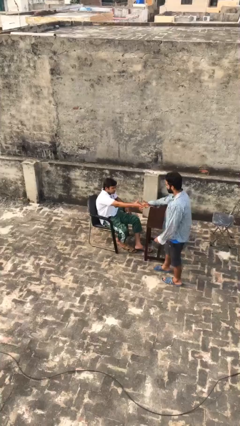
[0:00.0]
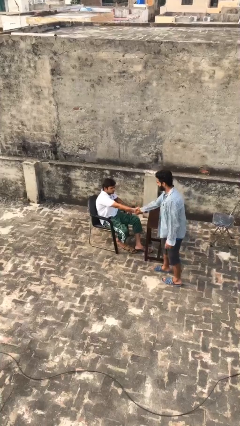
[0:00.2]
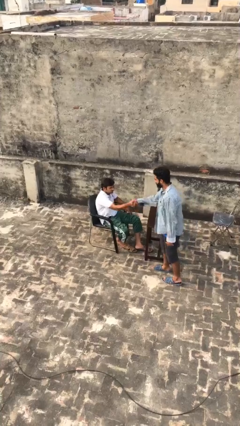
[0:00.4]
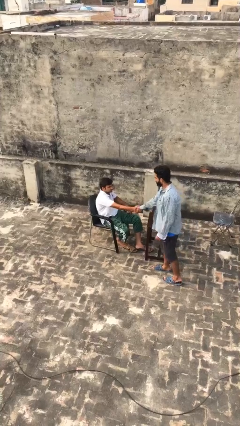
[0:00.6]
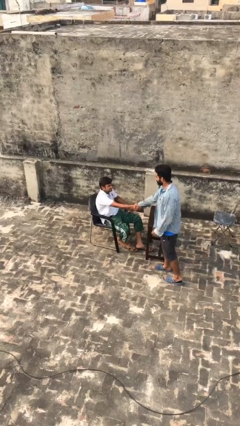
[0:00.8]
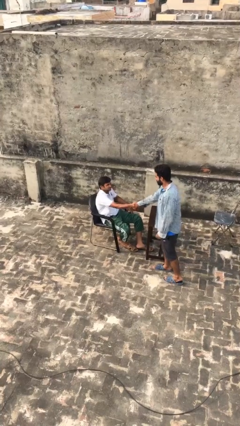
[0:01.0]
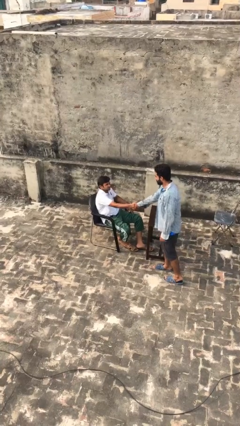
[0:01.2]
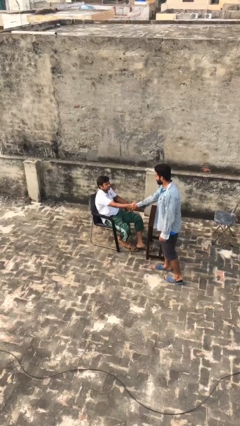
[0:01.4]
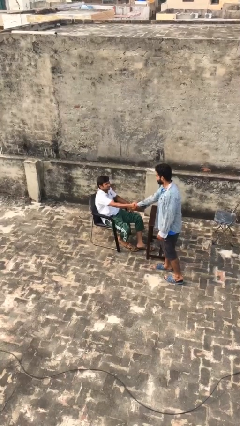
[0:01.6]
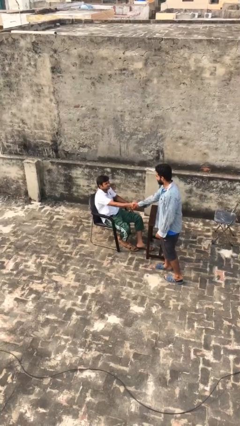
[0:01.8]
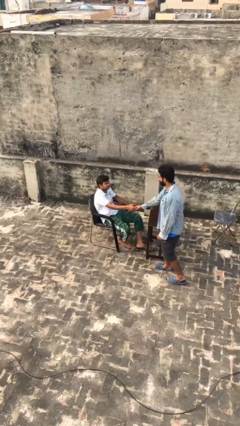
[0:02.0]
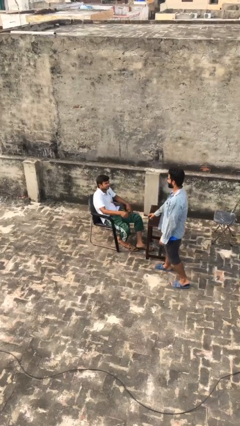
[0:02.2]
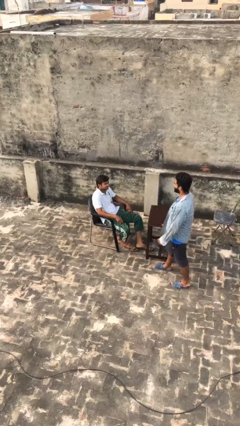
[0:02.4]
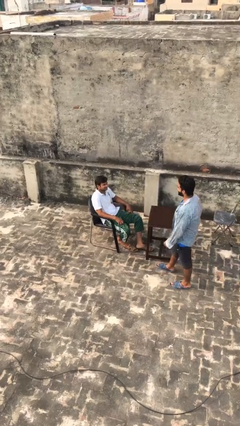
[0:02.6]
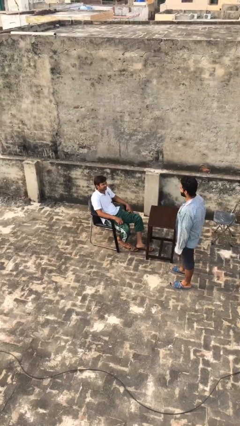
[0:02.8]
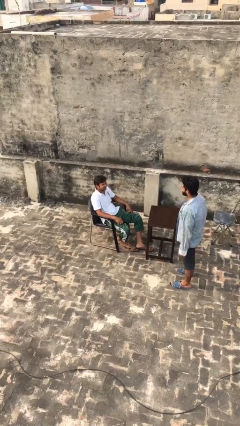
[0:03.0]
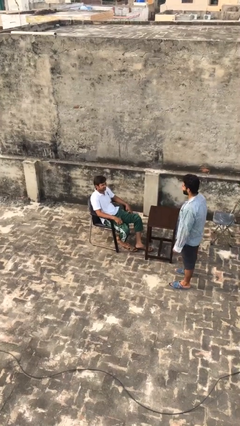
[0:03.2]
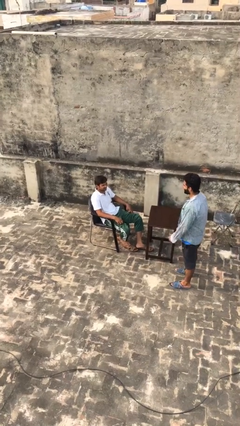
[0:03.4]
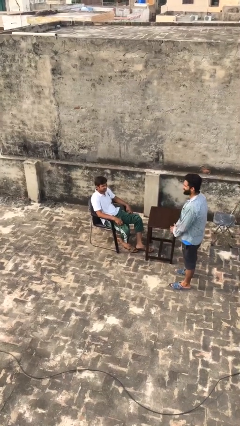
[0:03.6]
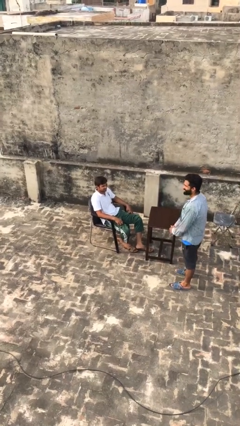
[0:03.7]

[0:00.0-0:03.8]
person shakes hand

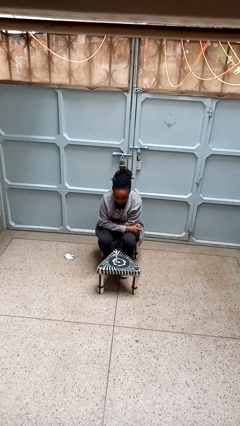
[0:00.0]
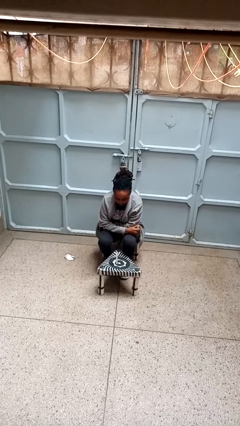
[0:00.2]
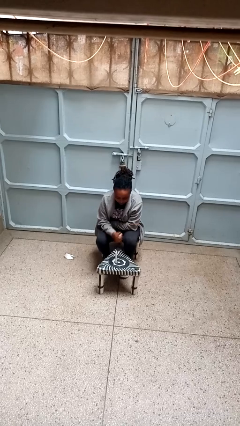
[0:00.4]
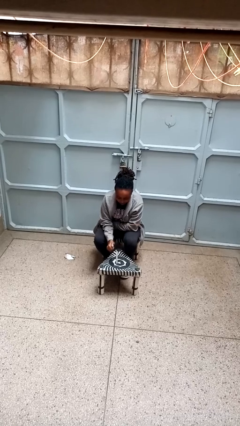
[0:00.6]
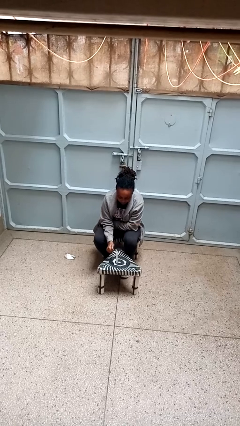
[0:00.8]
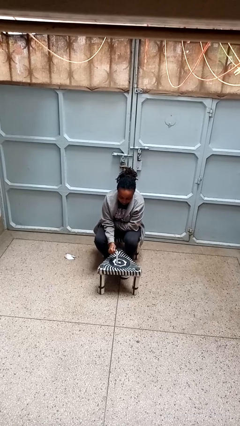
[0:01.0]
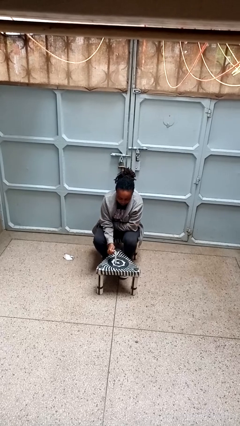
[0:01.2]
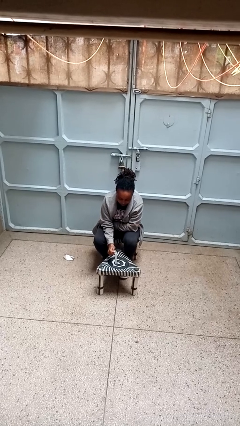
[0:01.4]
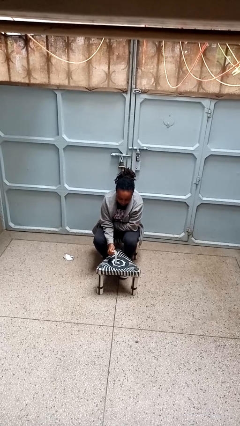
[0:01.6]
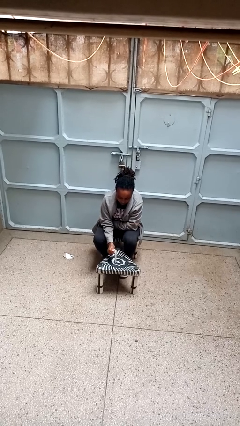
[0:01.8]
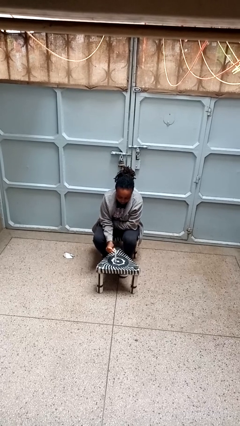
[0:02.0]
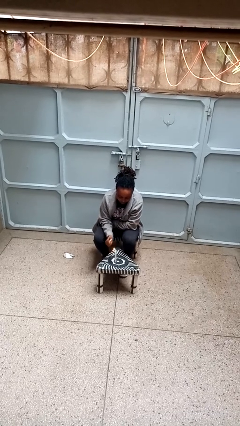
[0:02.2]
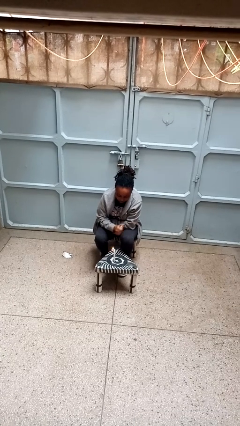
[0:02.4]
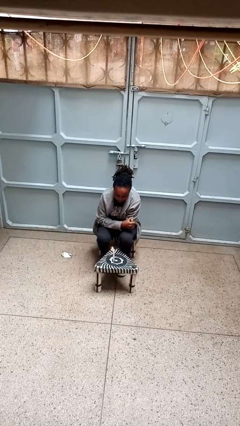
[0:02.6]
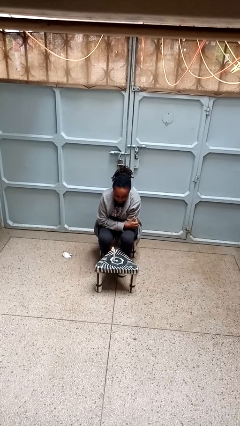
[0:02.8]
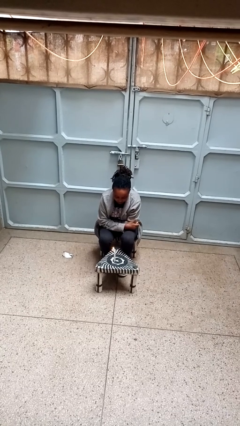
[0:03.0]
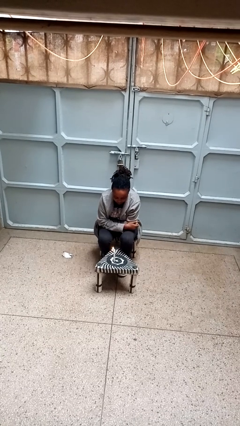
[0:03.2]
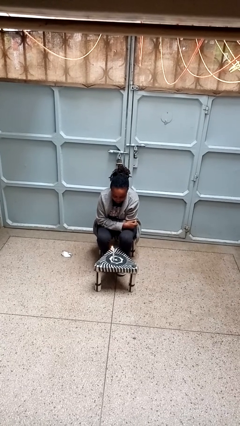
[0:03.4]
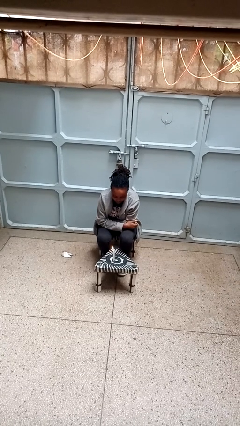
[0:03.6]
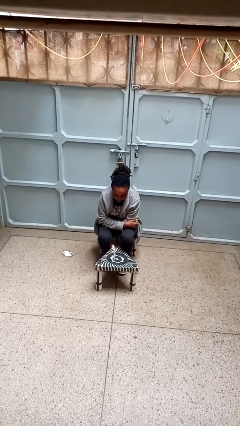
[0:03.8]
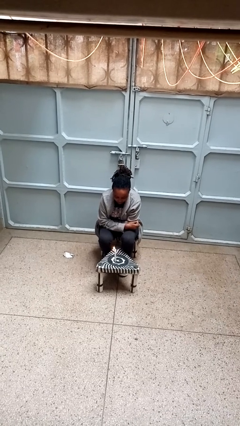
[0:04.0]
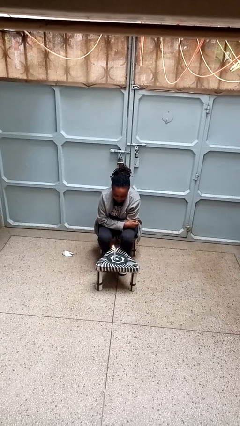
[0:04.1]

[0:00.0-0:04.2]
person lights candle

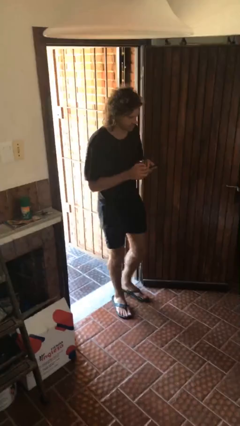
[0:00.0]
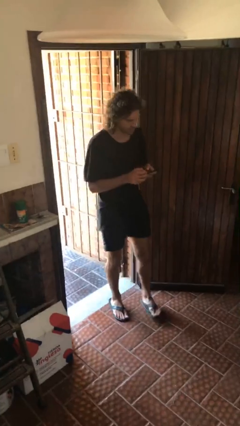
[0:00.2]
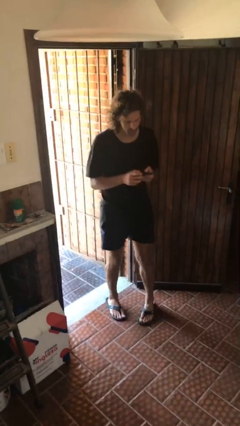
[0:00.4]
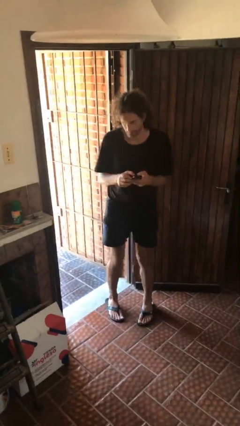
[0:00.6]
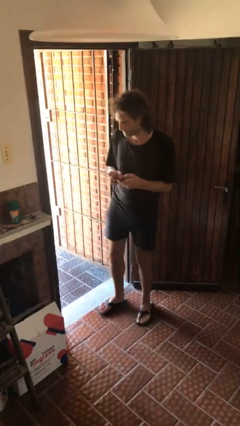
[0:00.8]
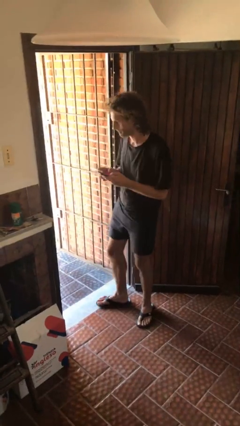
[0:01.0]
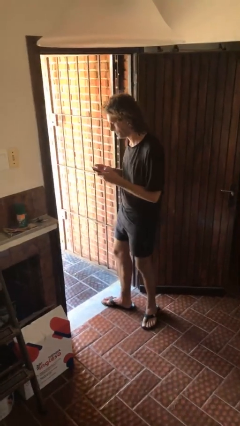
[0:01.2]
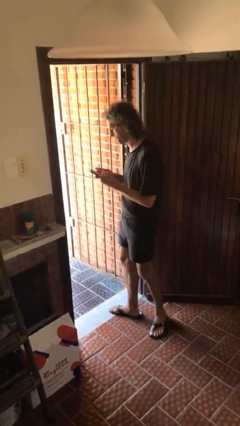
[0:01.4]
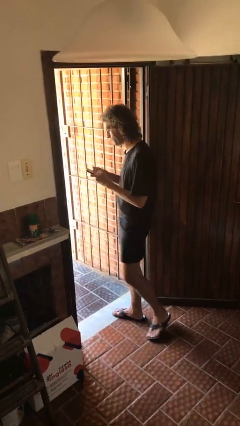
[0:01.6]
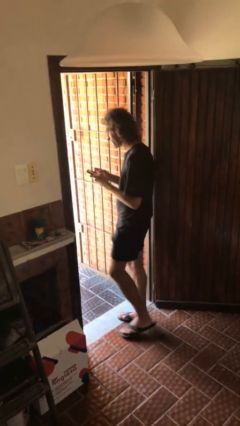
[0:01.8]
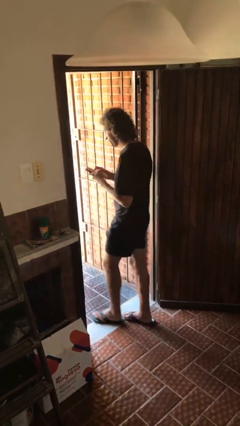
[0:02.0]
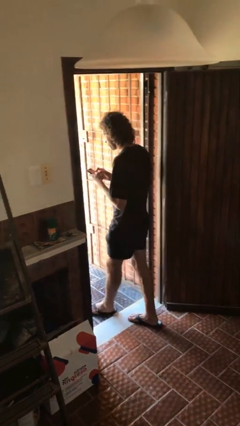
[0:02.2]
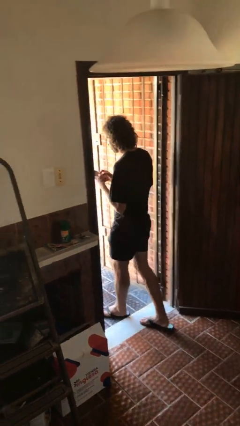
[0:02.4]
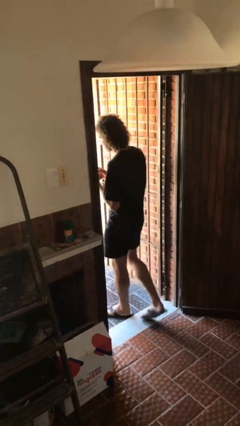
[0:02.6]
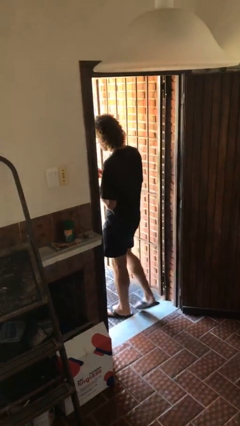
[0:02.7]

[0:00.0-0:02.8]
person exits scene through structure

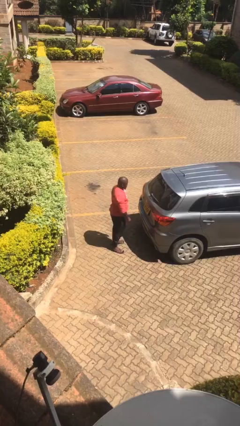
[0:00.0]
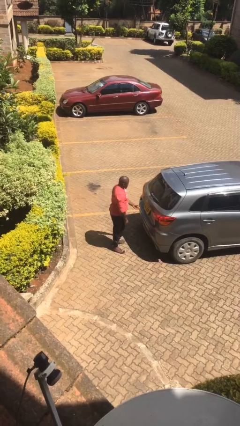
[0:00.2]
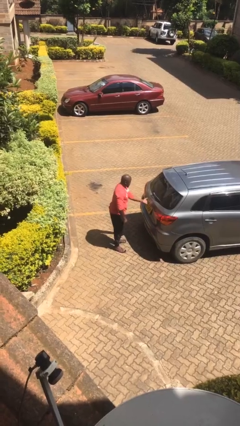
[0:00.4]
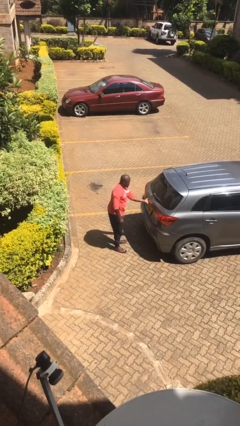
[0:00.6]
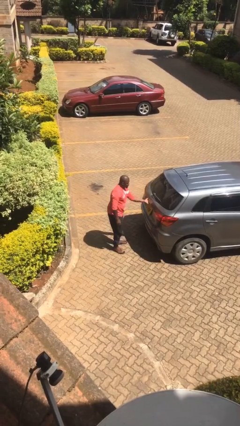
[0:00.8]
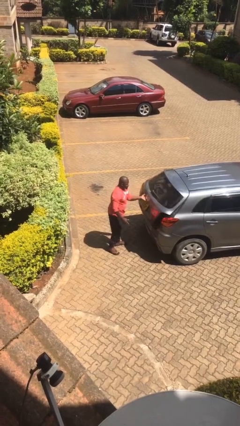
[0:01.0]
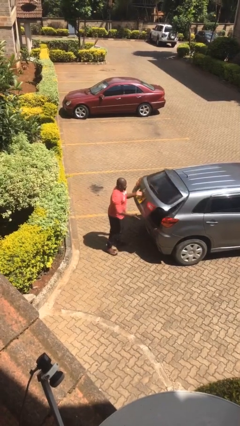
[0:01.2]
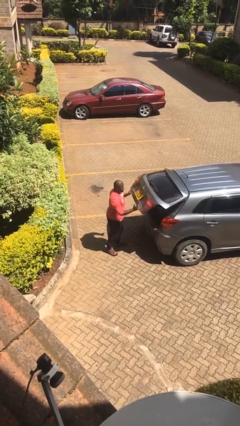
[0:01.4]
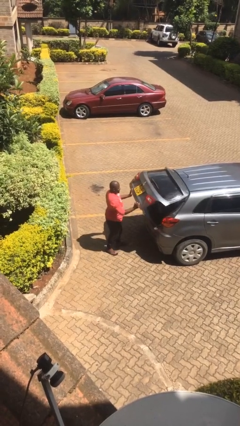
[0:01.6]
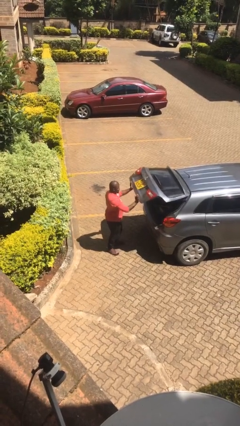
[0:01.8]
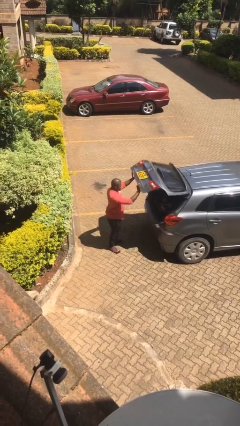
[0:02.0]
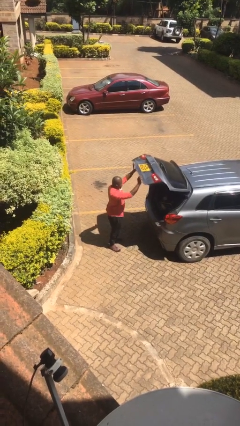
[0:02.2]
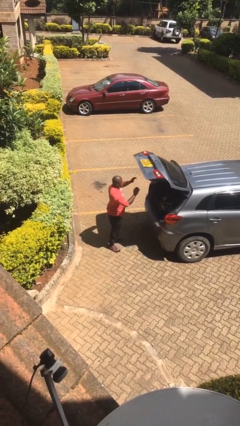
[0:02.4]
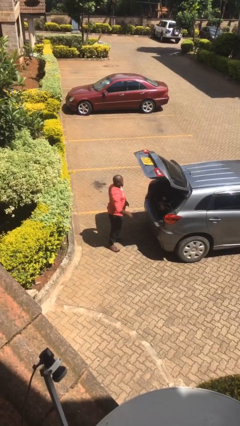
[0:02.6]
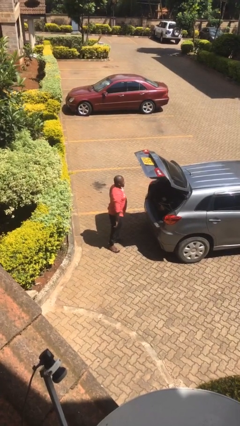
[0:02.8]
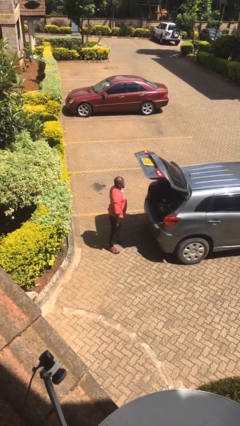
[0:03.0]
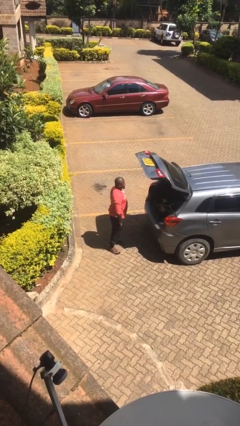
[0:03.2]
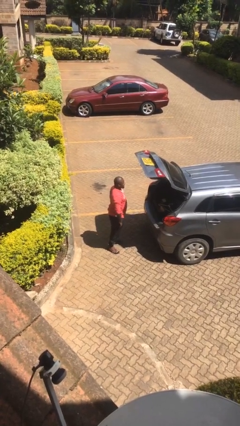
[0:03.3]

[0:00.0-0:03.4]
person opens car trunk

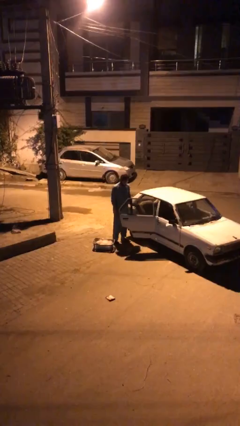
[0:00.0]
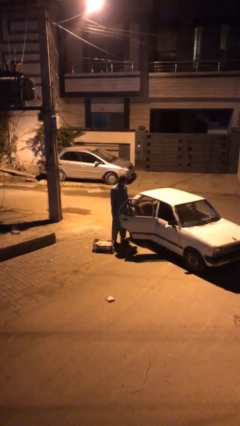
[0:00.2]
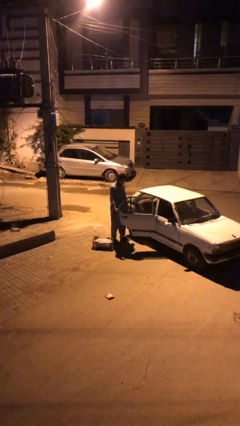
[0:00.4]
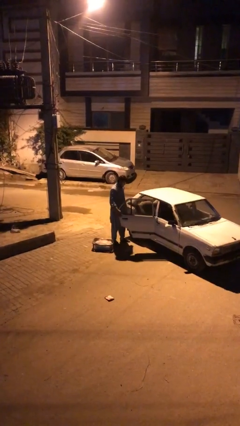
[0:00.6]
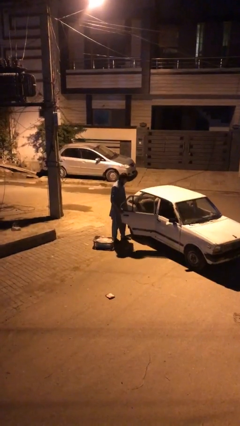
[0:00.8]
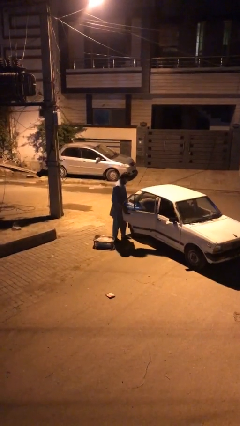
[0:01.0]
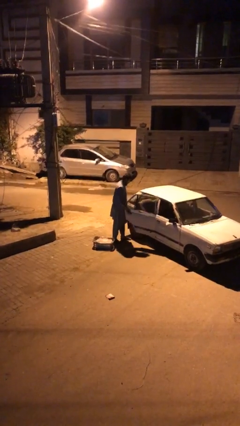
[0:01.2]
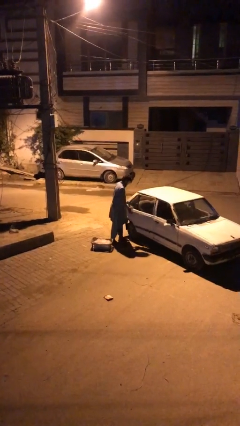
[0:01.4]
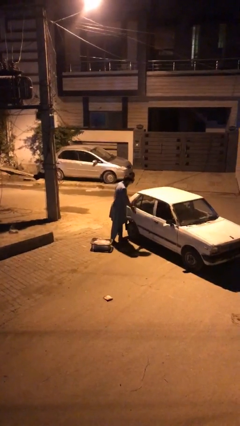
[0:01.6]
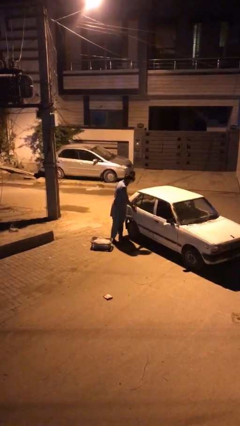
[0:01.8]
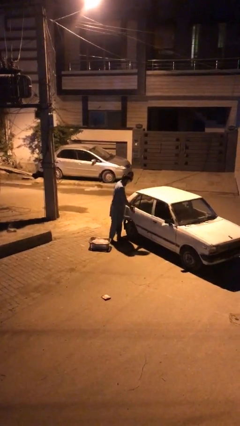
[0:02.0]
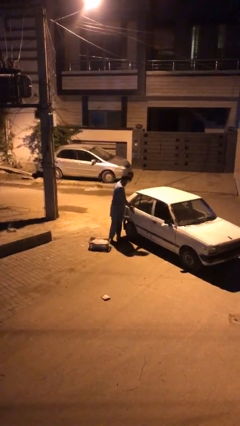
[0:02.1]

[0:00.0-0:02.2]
person closes car door

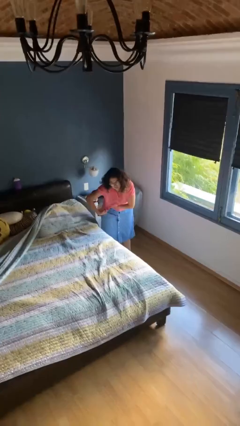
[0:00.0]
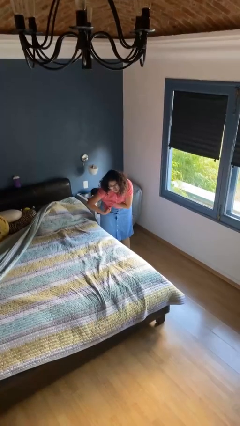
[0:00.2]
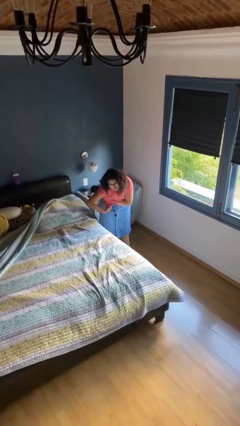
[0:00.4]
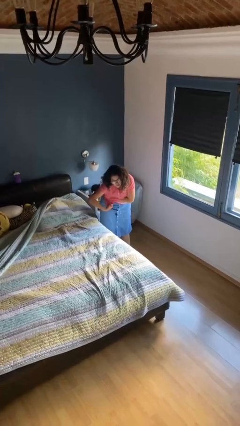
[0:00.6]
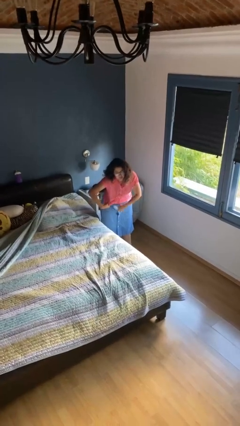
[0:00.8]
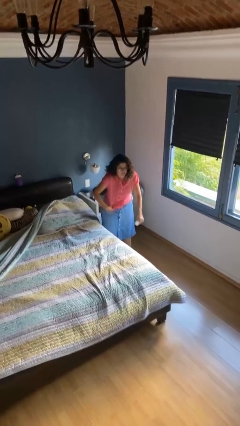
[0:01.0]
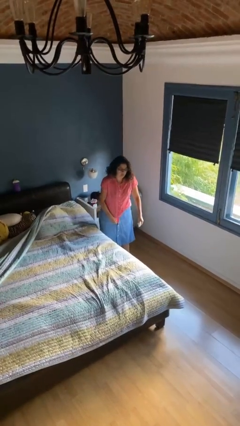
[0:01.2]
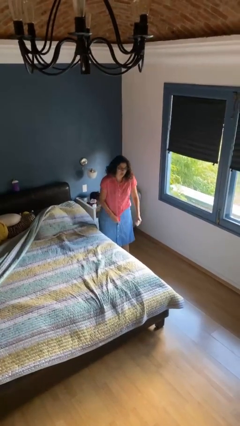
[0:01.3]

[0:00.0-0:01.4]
person applies deodorant
